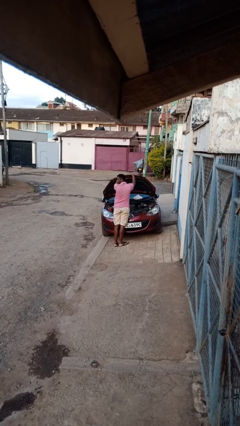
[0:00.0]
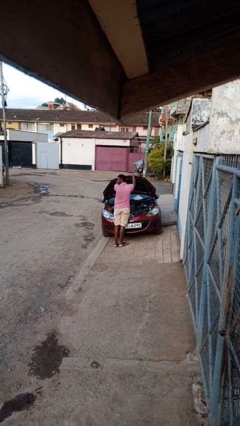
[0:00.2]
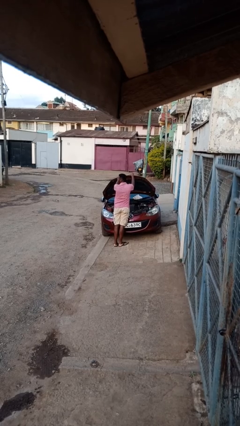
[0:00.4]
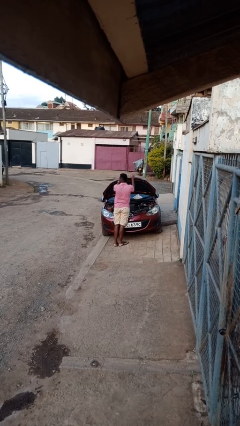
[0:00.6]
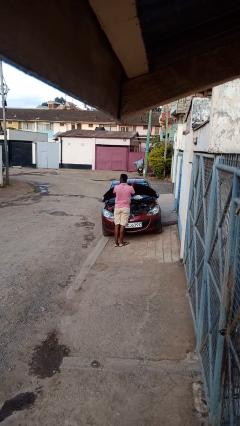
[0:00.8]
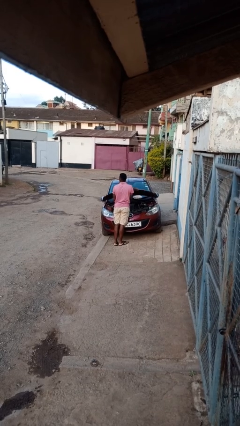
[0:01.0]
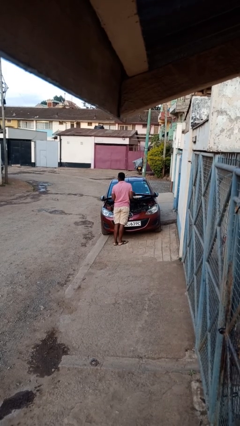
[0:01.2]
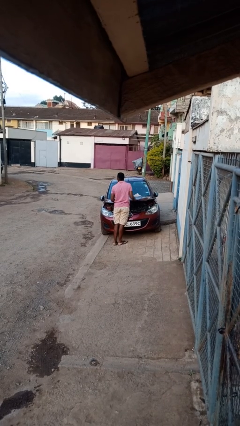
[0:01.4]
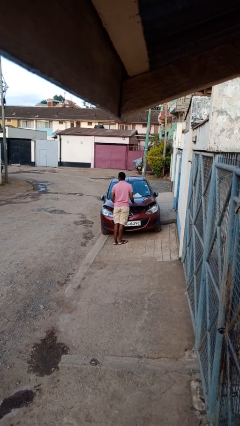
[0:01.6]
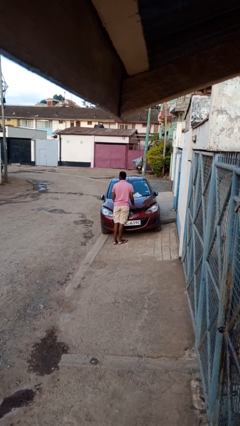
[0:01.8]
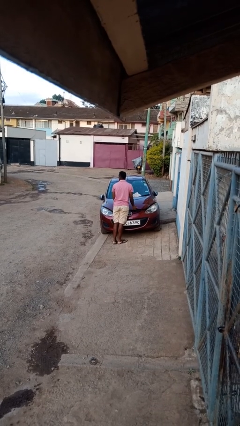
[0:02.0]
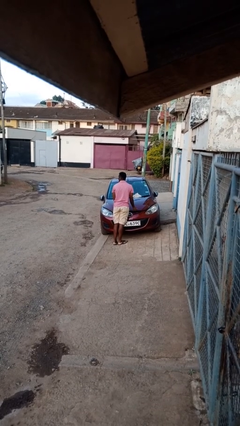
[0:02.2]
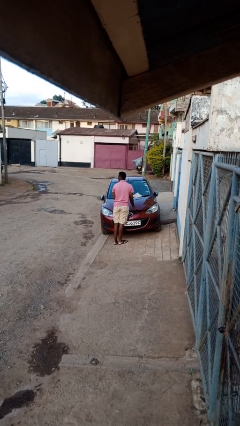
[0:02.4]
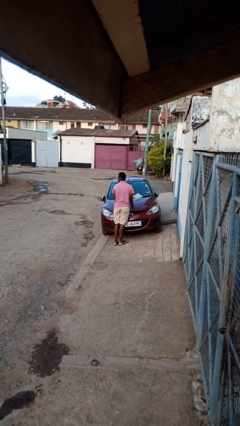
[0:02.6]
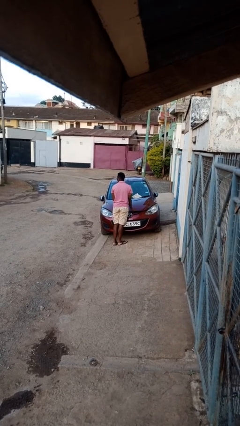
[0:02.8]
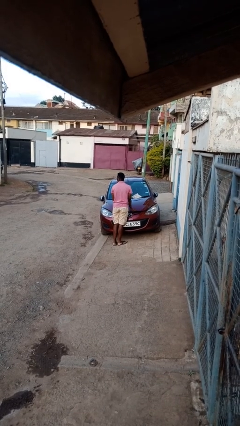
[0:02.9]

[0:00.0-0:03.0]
person closes car hood

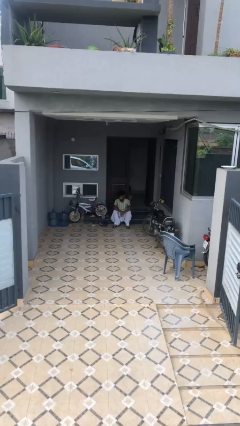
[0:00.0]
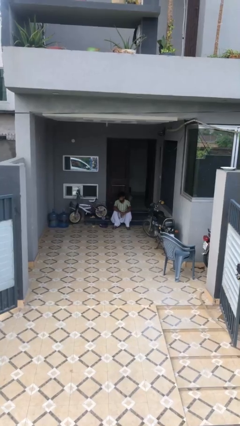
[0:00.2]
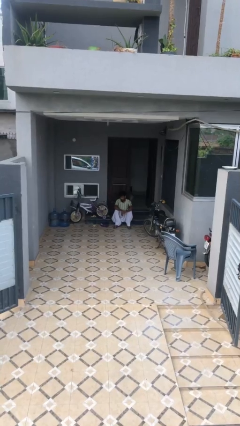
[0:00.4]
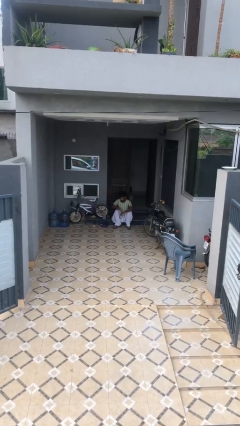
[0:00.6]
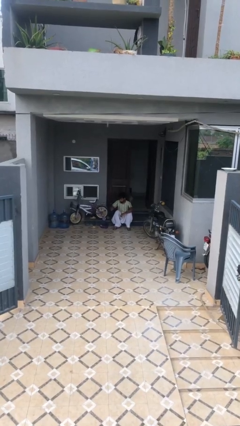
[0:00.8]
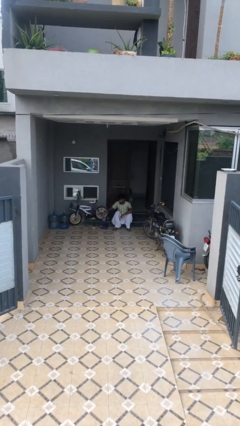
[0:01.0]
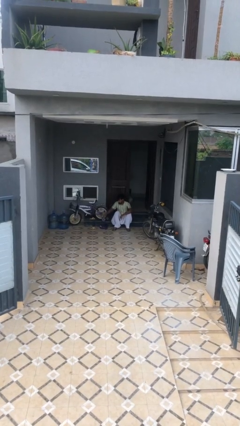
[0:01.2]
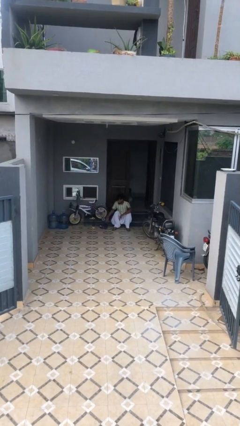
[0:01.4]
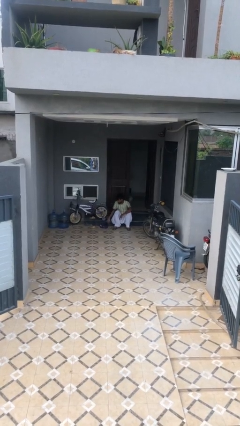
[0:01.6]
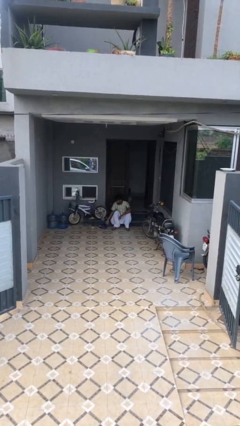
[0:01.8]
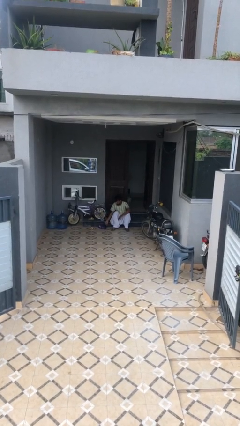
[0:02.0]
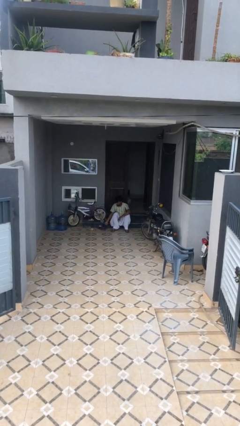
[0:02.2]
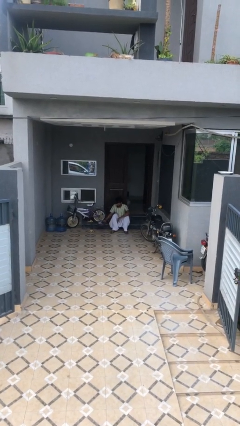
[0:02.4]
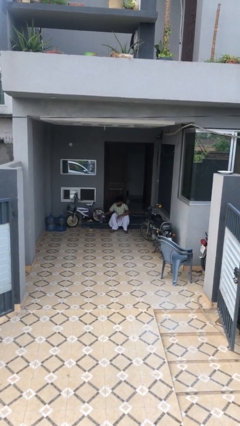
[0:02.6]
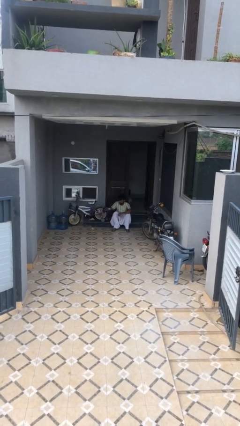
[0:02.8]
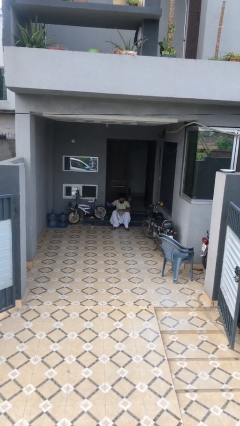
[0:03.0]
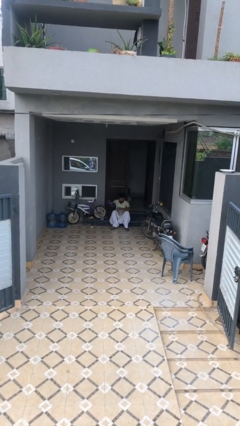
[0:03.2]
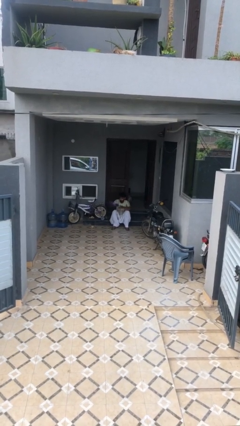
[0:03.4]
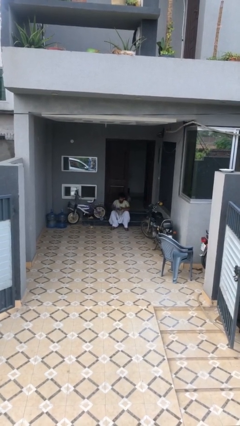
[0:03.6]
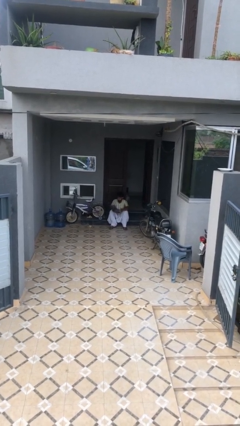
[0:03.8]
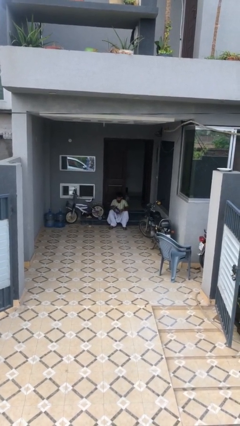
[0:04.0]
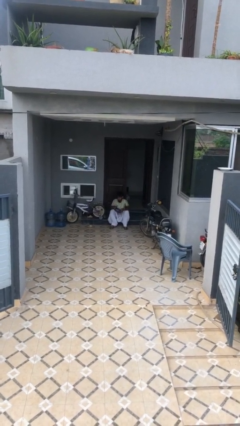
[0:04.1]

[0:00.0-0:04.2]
person picks up object from floor

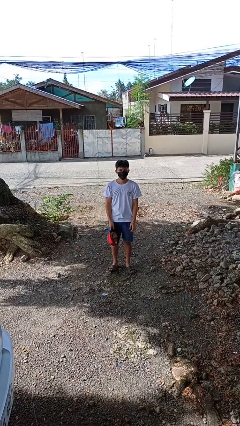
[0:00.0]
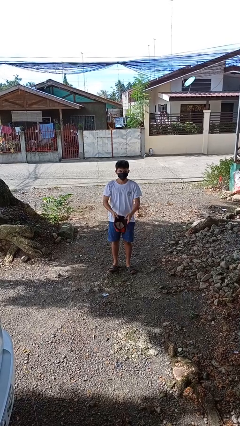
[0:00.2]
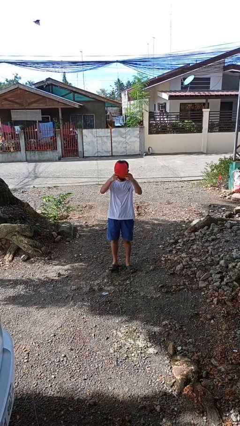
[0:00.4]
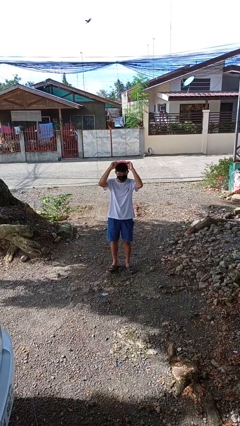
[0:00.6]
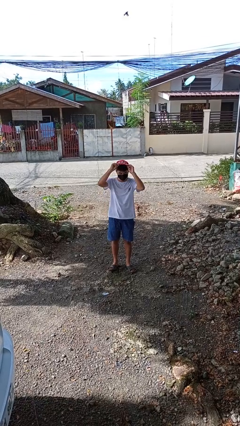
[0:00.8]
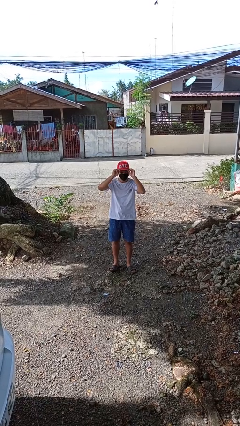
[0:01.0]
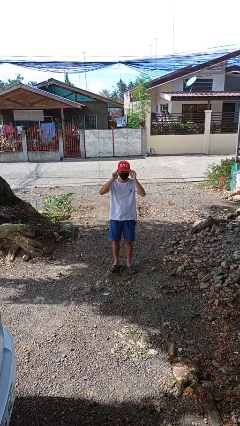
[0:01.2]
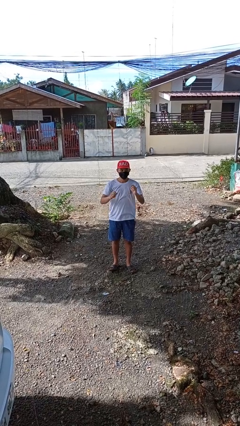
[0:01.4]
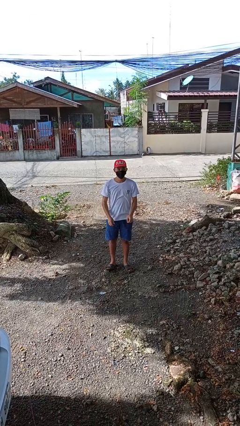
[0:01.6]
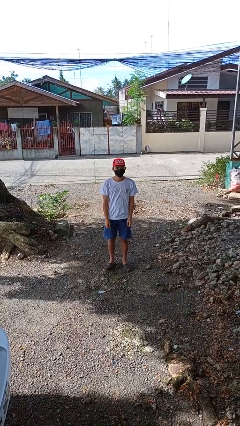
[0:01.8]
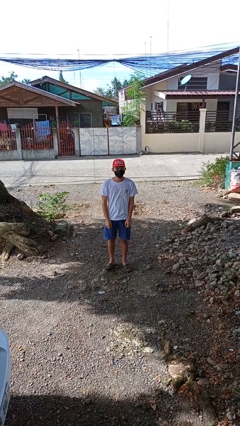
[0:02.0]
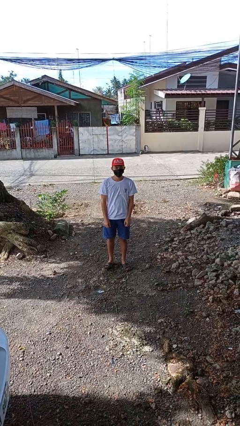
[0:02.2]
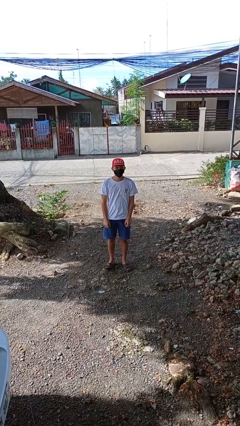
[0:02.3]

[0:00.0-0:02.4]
person puts on hat

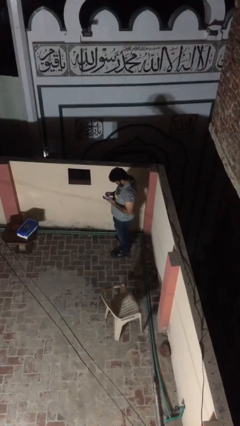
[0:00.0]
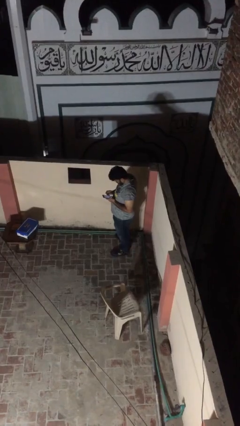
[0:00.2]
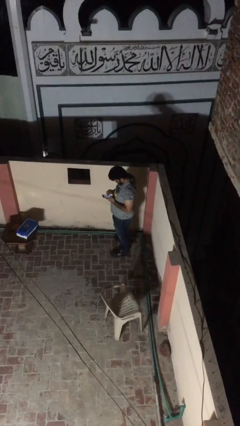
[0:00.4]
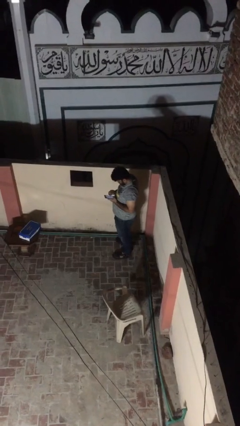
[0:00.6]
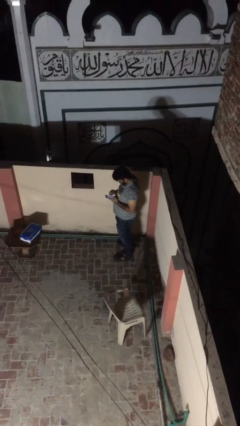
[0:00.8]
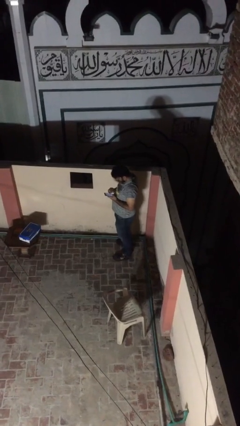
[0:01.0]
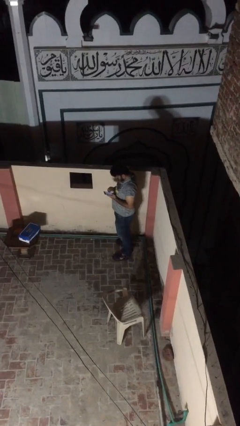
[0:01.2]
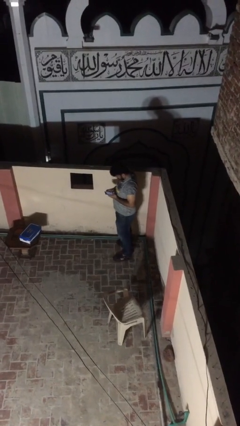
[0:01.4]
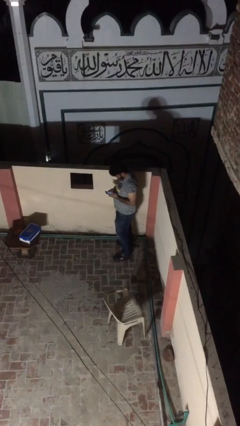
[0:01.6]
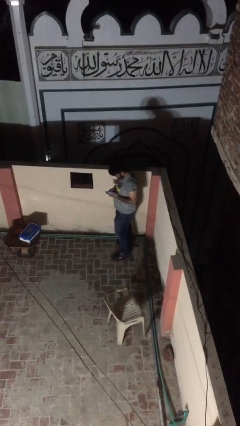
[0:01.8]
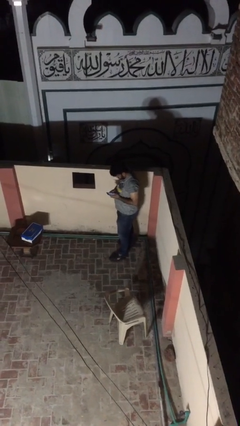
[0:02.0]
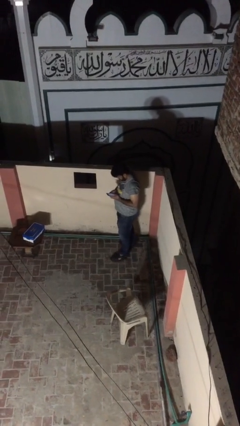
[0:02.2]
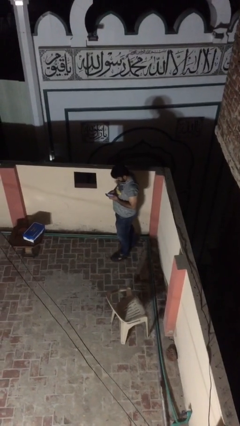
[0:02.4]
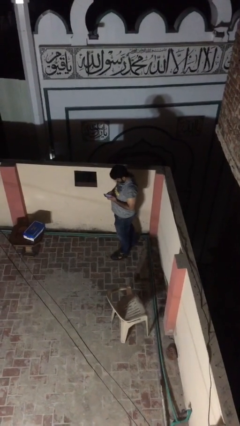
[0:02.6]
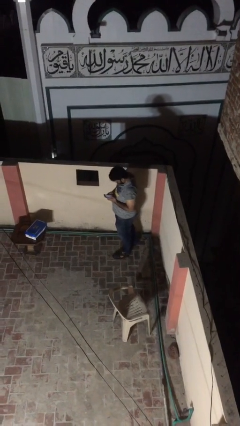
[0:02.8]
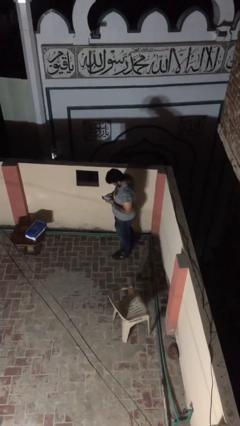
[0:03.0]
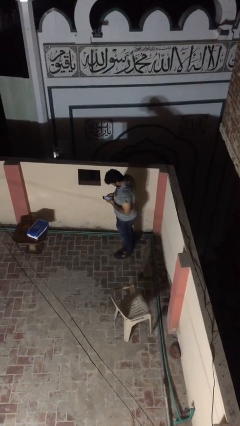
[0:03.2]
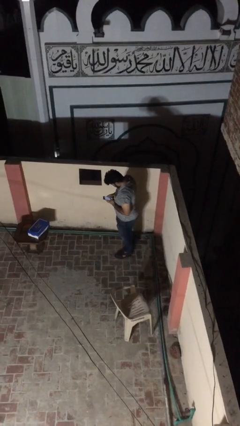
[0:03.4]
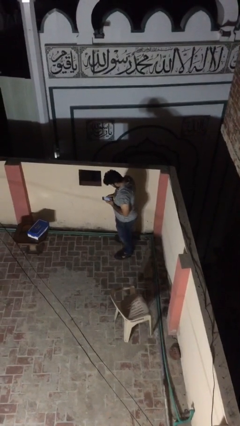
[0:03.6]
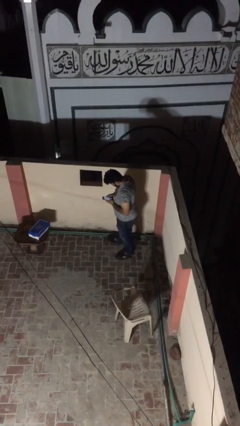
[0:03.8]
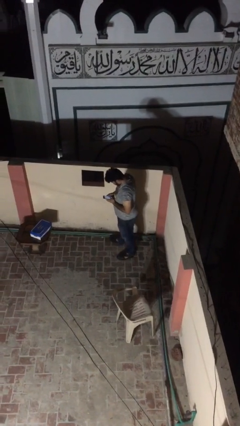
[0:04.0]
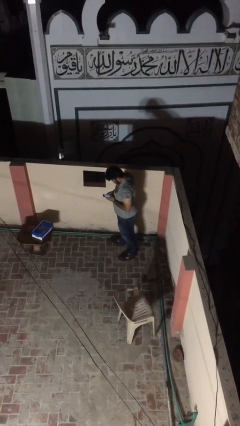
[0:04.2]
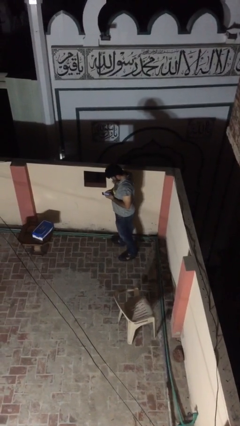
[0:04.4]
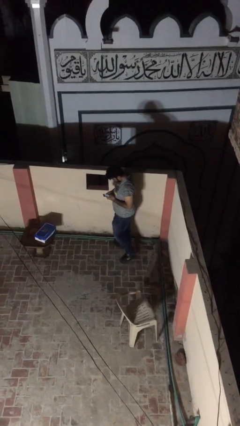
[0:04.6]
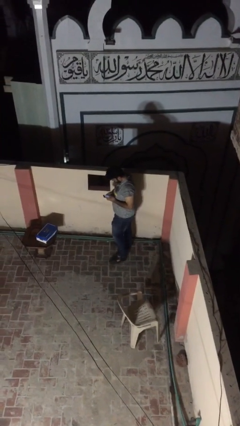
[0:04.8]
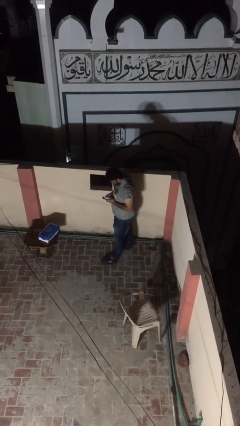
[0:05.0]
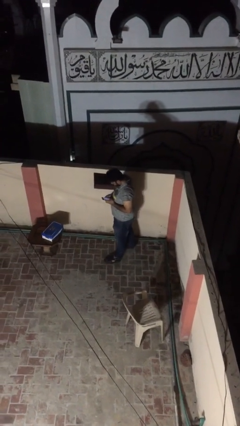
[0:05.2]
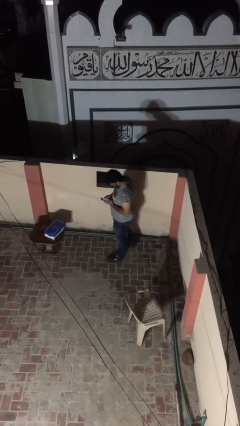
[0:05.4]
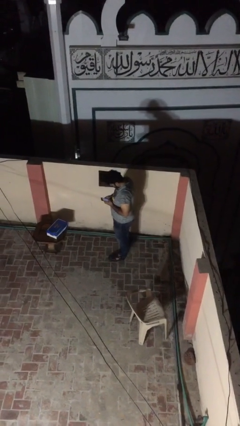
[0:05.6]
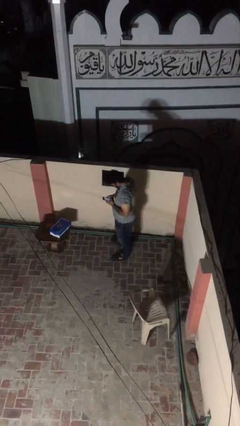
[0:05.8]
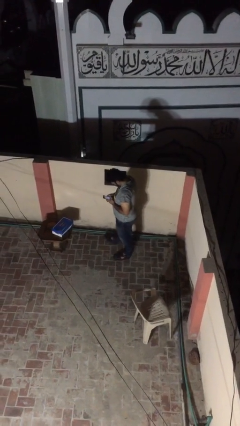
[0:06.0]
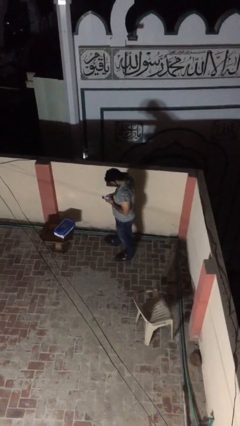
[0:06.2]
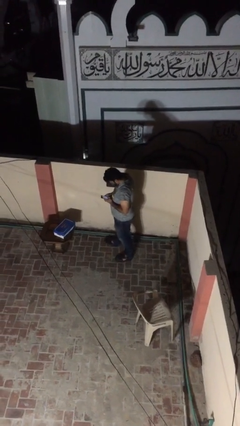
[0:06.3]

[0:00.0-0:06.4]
person texts on phone

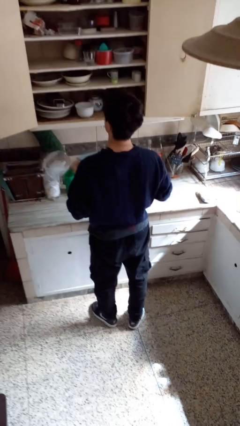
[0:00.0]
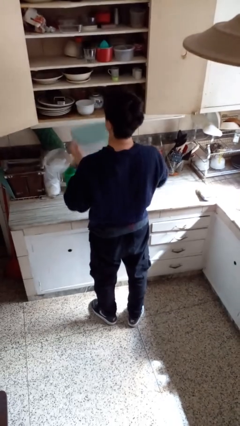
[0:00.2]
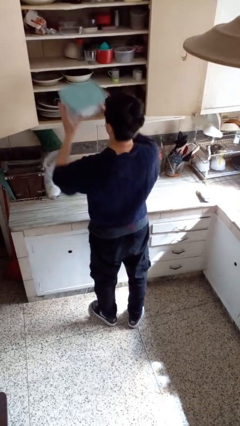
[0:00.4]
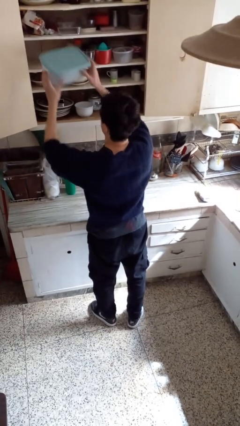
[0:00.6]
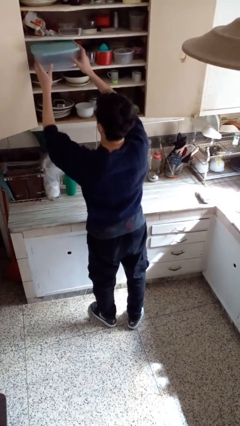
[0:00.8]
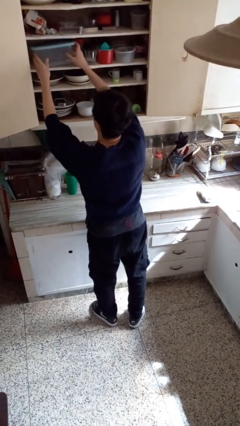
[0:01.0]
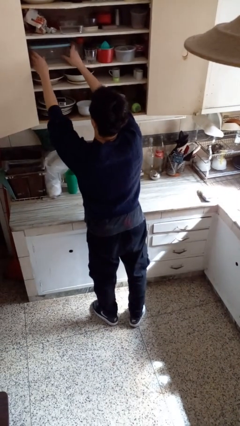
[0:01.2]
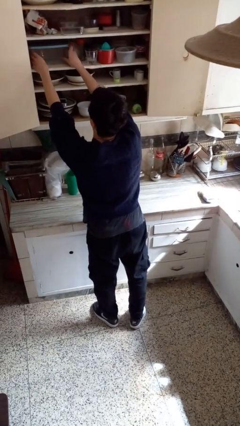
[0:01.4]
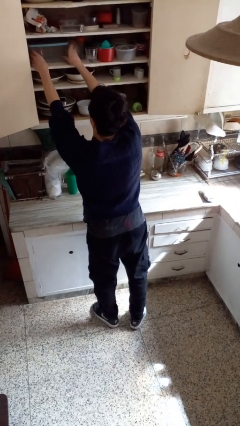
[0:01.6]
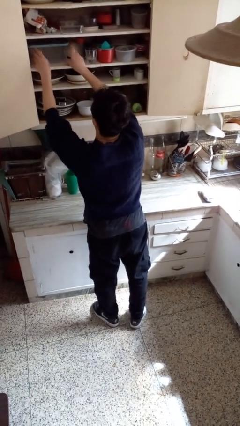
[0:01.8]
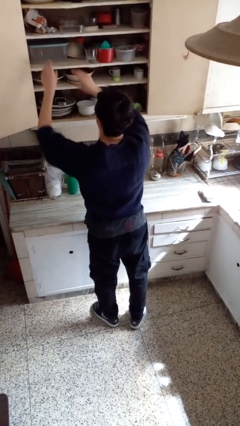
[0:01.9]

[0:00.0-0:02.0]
person puts down object into cabinet
